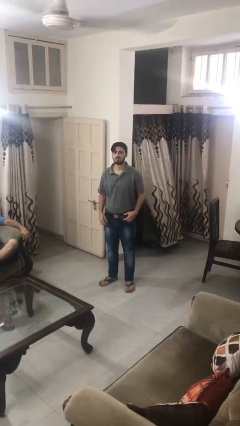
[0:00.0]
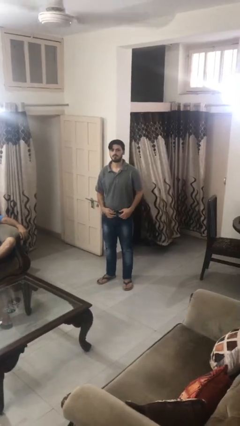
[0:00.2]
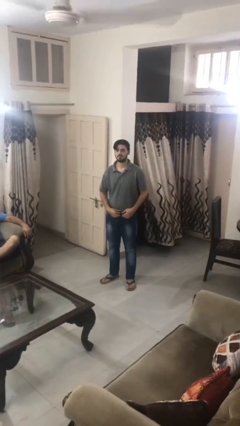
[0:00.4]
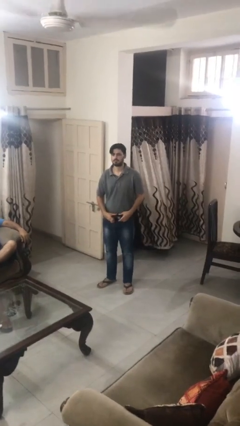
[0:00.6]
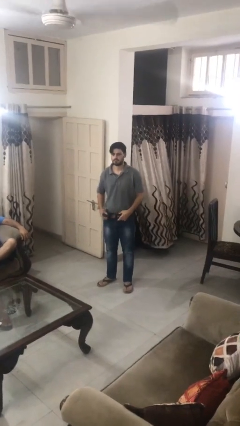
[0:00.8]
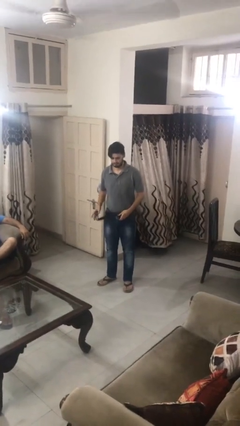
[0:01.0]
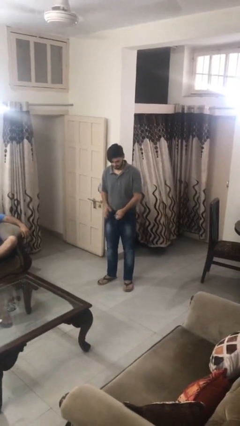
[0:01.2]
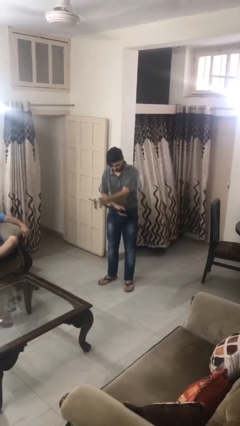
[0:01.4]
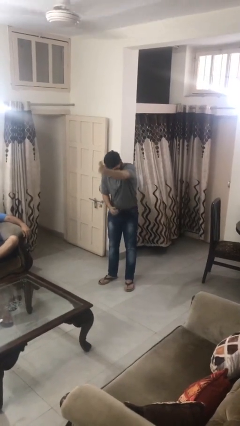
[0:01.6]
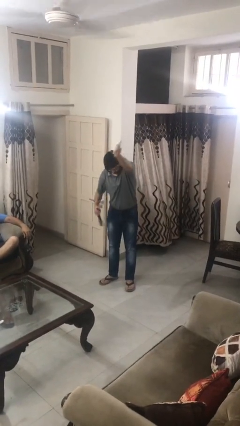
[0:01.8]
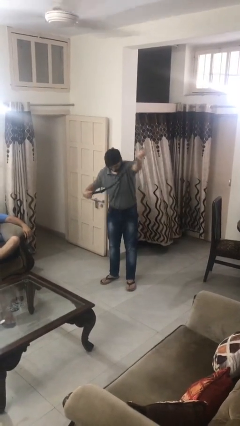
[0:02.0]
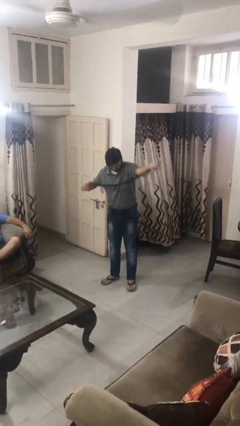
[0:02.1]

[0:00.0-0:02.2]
person takes off belt

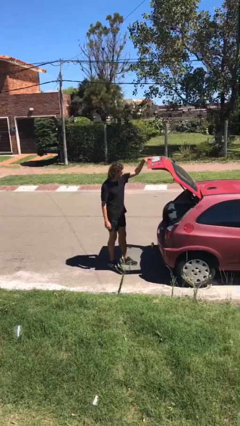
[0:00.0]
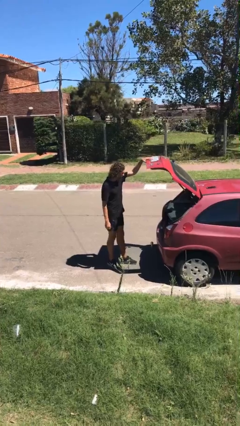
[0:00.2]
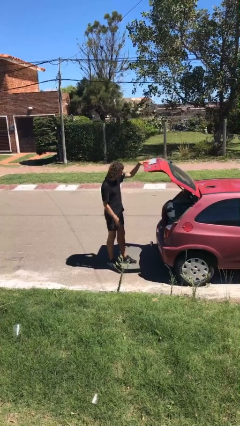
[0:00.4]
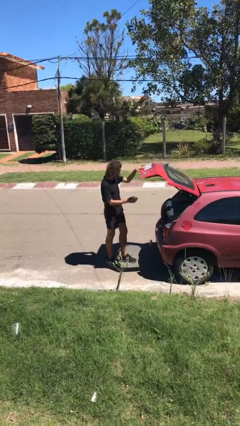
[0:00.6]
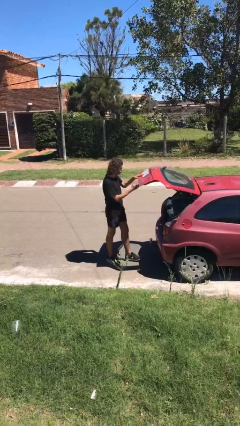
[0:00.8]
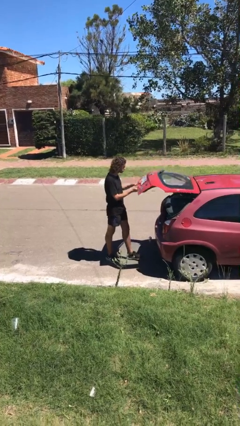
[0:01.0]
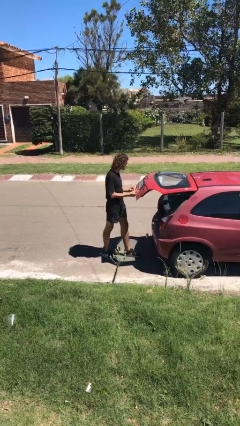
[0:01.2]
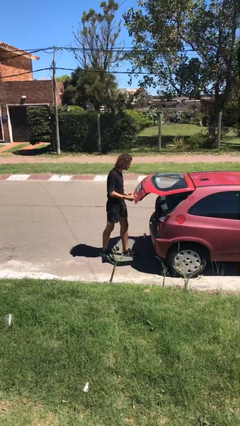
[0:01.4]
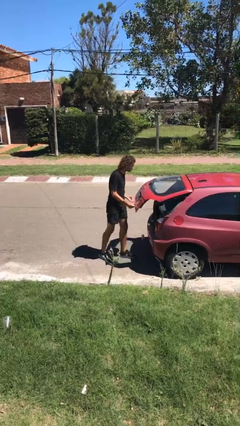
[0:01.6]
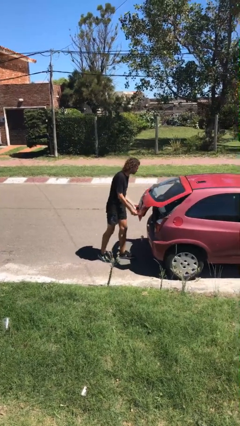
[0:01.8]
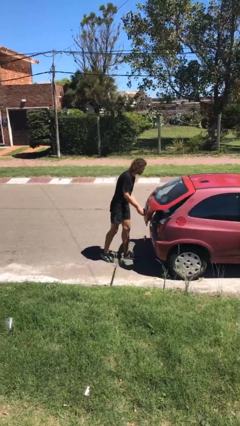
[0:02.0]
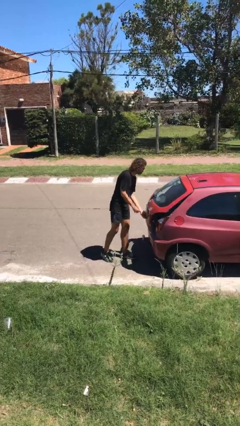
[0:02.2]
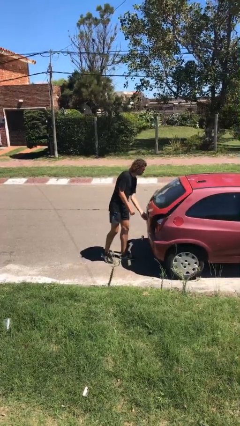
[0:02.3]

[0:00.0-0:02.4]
person closes car trunk

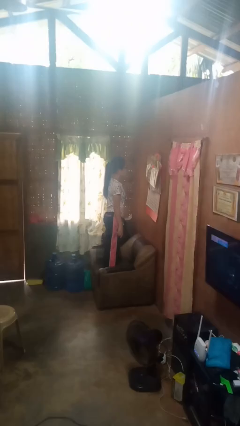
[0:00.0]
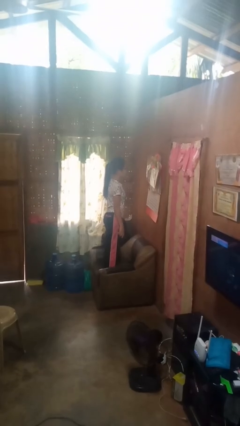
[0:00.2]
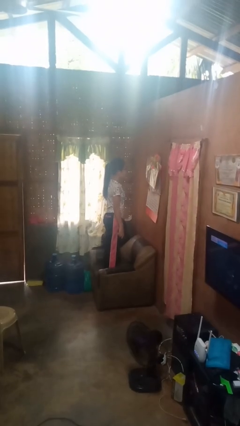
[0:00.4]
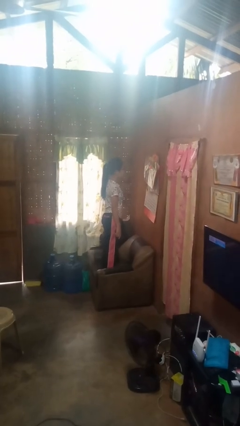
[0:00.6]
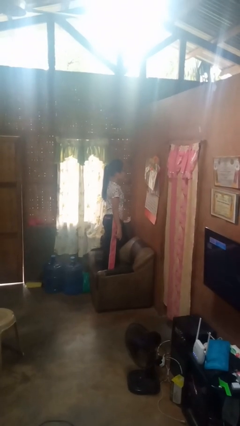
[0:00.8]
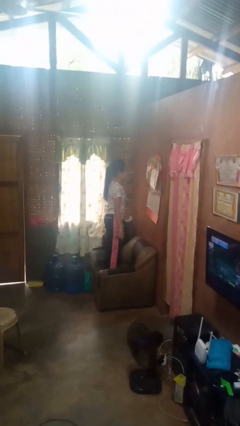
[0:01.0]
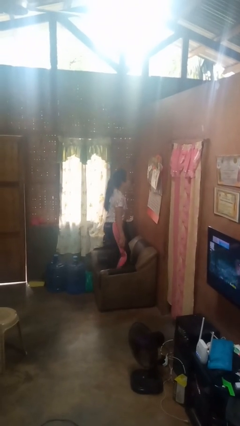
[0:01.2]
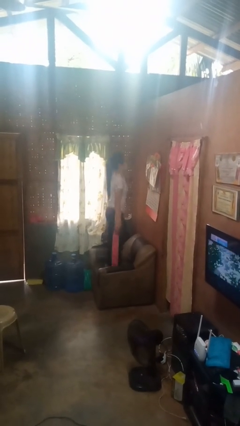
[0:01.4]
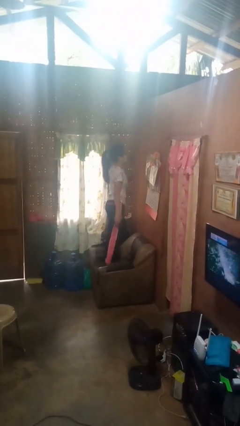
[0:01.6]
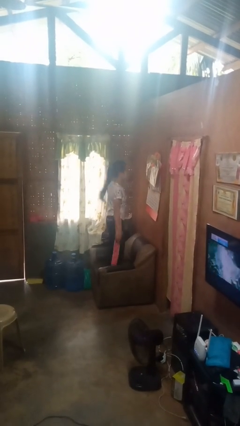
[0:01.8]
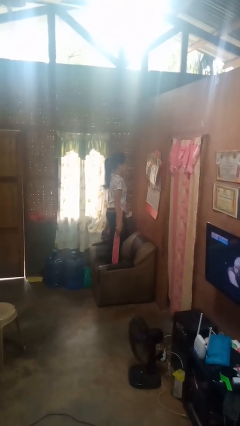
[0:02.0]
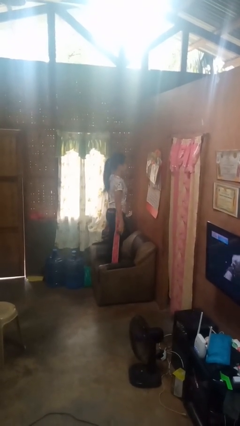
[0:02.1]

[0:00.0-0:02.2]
person jumps on couch

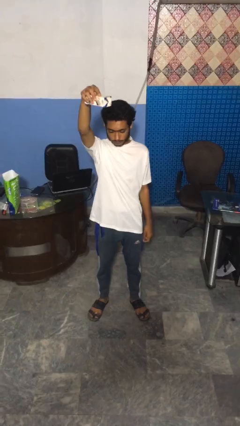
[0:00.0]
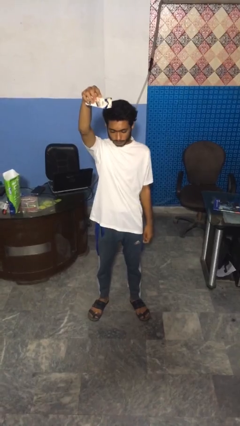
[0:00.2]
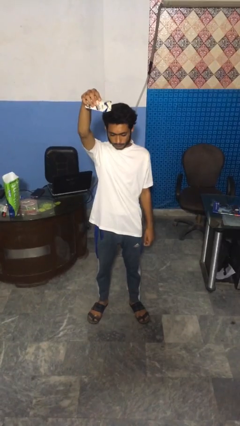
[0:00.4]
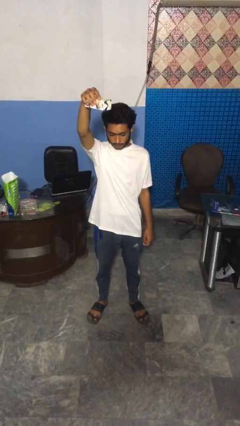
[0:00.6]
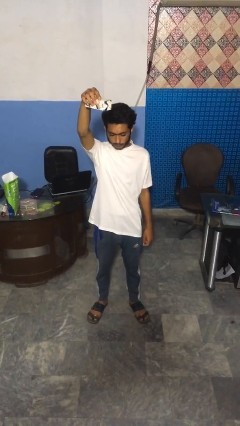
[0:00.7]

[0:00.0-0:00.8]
person drops object

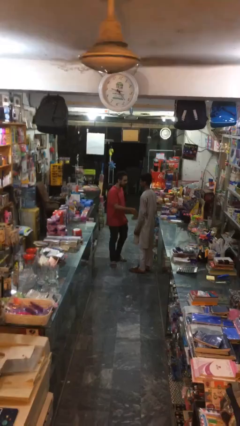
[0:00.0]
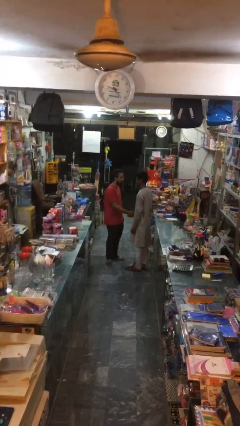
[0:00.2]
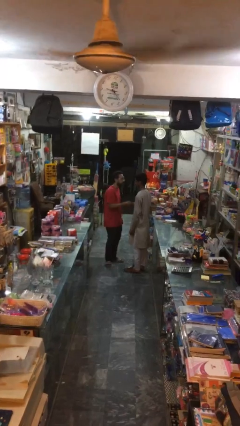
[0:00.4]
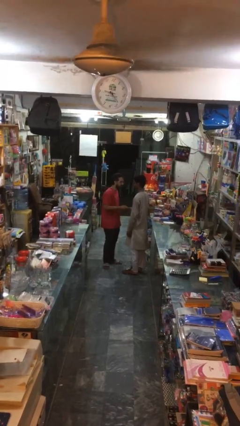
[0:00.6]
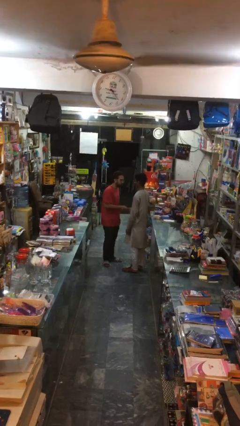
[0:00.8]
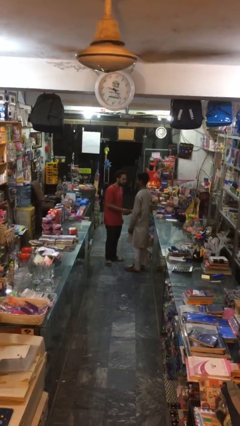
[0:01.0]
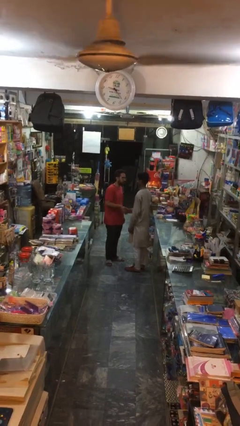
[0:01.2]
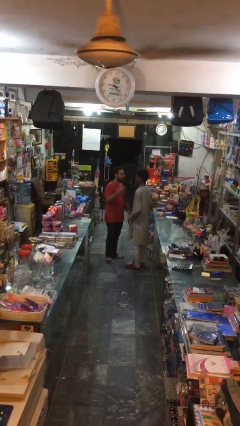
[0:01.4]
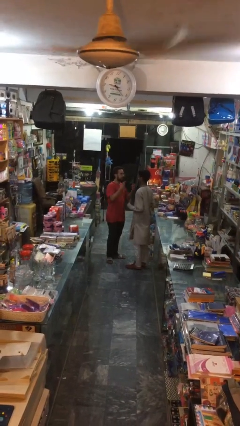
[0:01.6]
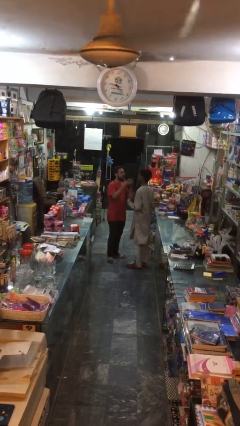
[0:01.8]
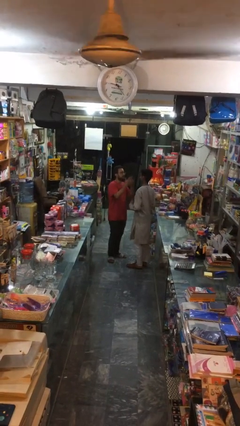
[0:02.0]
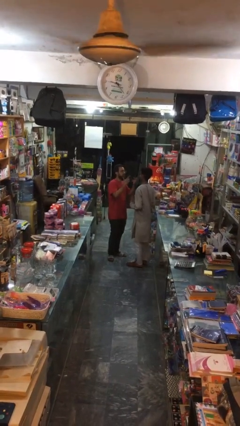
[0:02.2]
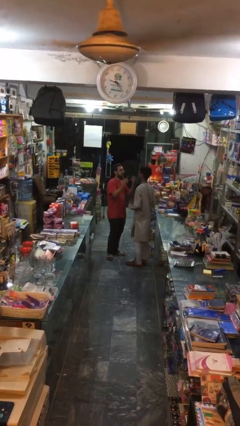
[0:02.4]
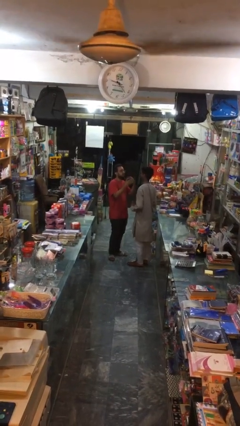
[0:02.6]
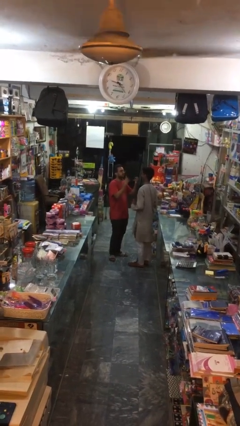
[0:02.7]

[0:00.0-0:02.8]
person shakes hand

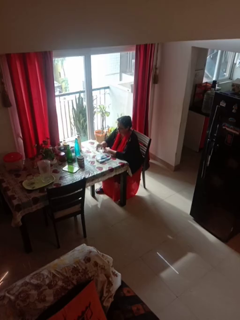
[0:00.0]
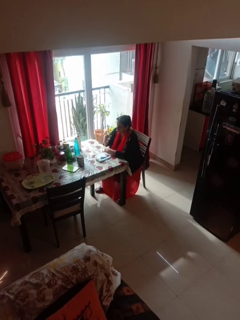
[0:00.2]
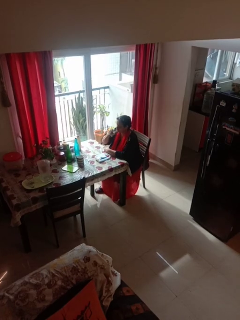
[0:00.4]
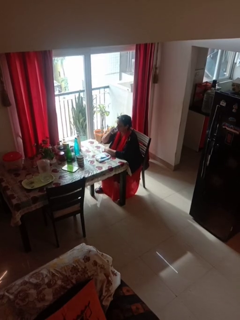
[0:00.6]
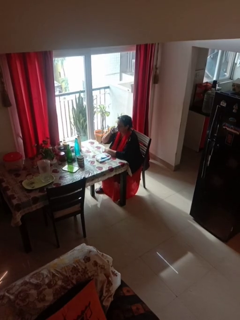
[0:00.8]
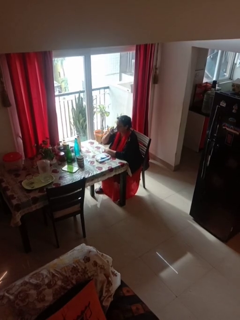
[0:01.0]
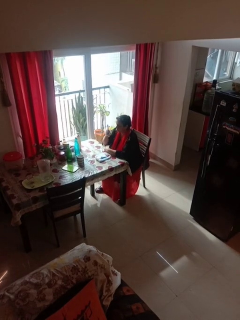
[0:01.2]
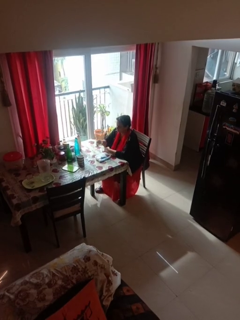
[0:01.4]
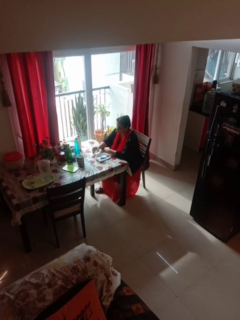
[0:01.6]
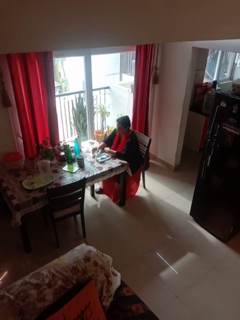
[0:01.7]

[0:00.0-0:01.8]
person drinks from cup

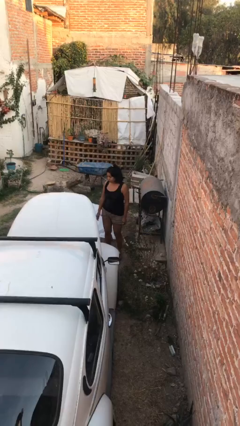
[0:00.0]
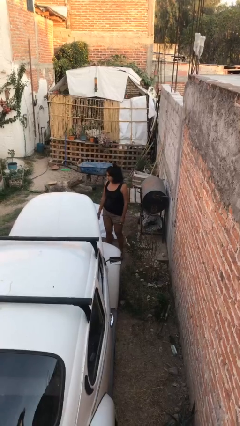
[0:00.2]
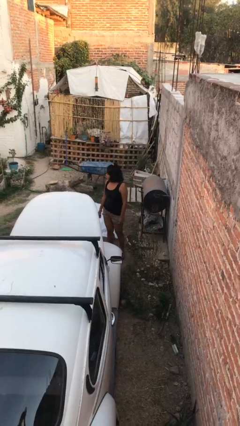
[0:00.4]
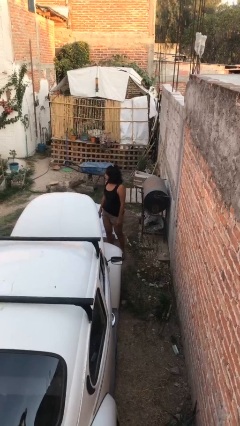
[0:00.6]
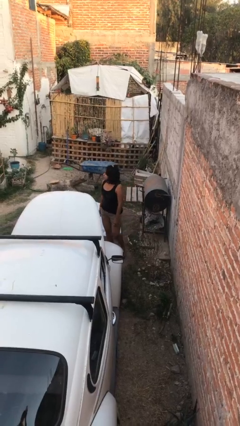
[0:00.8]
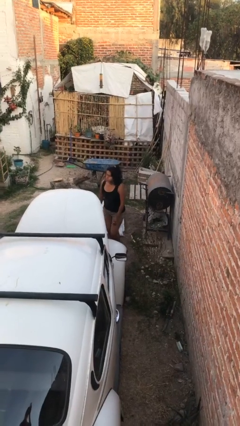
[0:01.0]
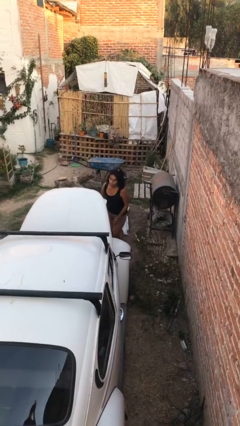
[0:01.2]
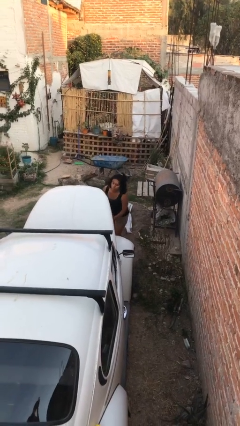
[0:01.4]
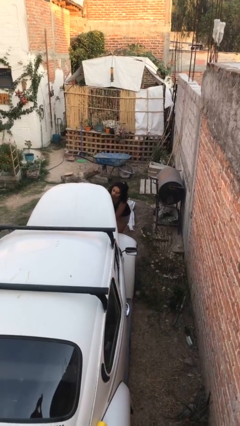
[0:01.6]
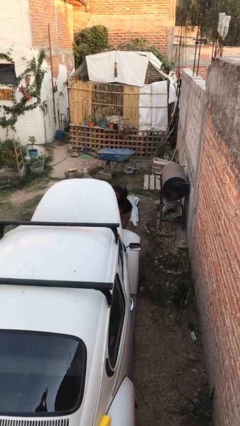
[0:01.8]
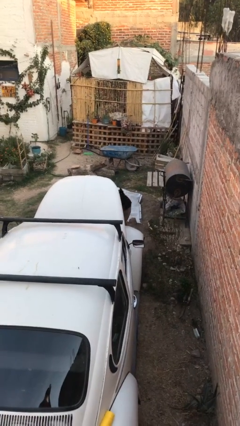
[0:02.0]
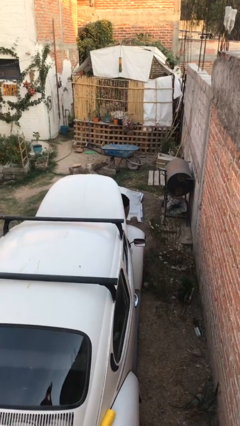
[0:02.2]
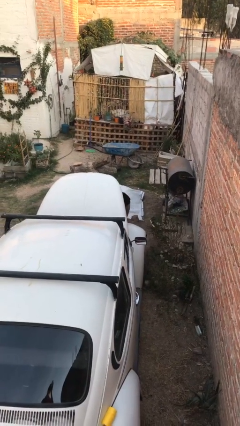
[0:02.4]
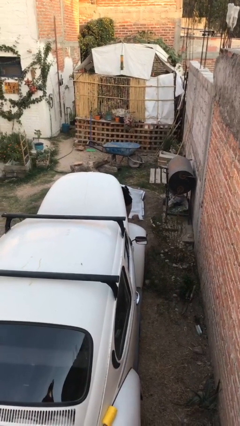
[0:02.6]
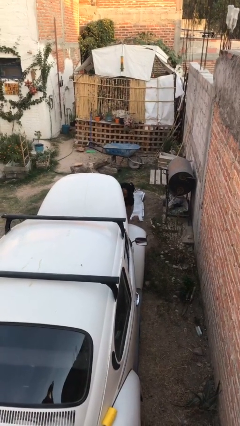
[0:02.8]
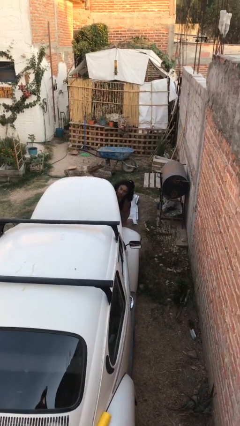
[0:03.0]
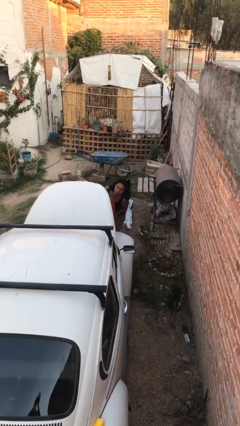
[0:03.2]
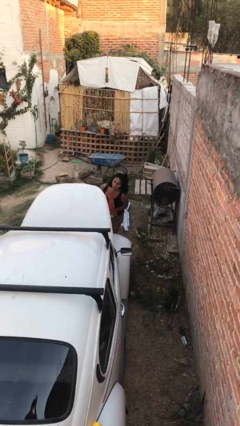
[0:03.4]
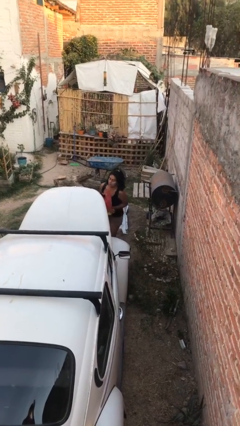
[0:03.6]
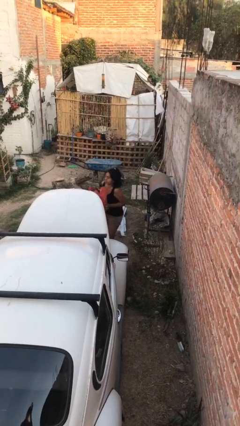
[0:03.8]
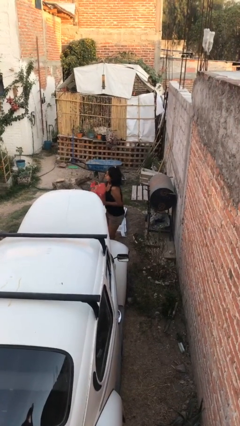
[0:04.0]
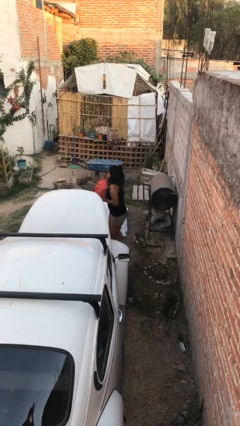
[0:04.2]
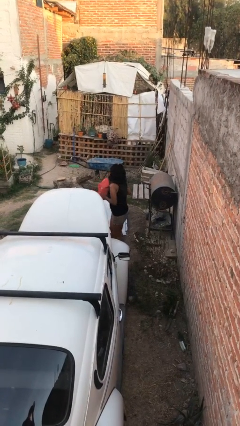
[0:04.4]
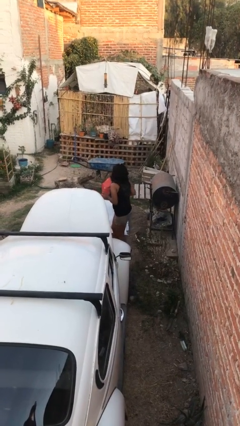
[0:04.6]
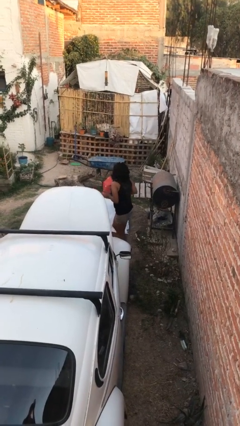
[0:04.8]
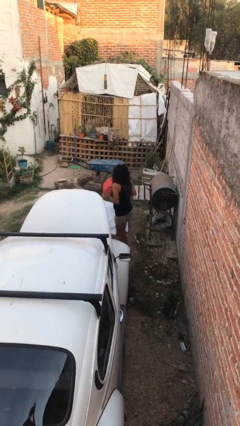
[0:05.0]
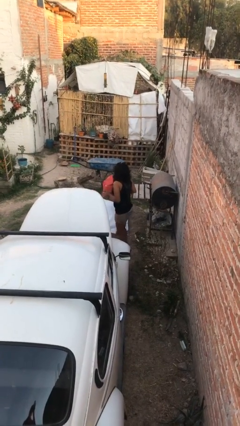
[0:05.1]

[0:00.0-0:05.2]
person unloads car

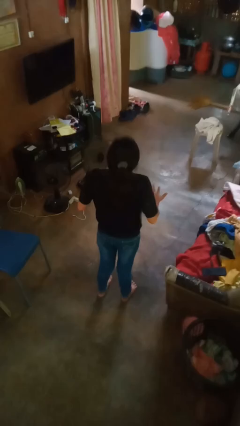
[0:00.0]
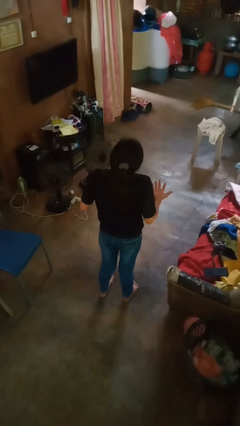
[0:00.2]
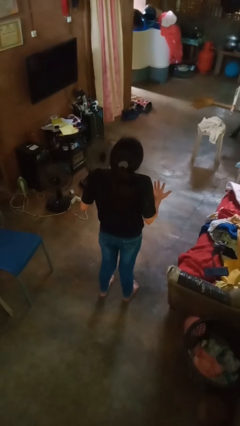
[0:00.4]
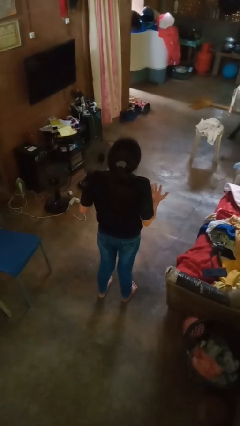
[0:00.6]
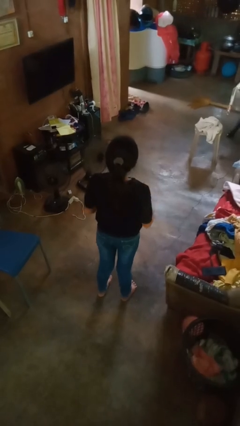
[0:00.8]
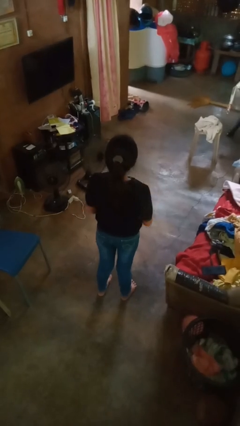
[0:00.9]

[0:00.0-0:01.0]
person shrugs
